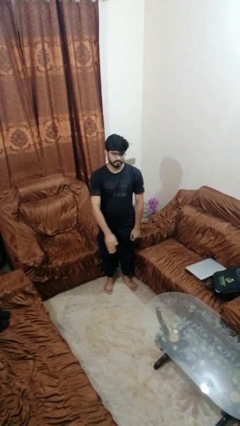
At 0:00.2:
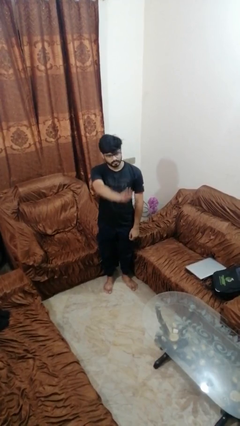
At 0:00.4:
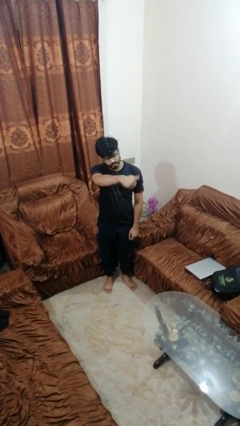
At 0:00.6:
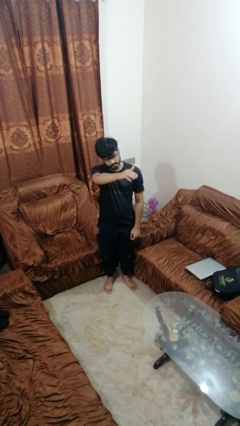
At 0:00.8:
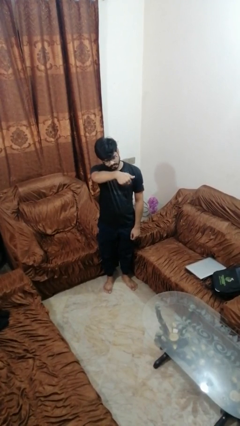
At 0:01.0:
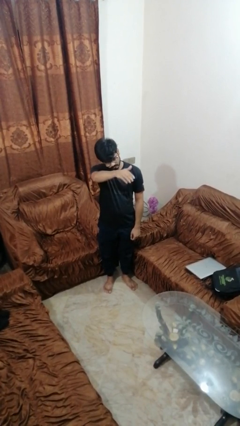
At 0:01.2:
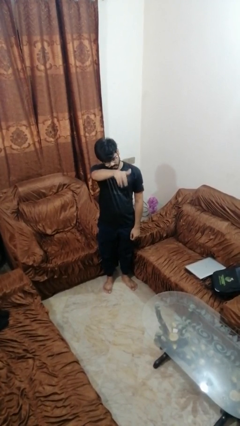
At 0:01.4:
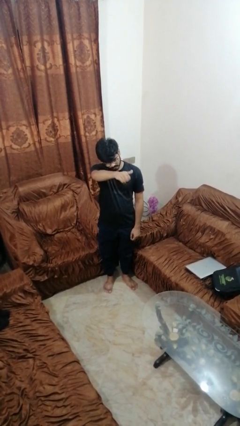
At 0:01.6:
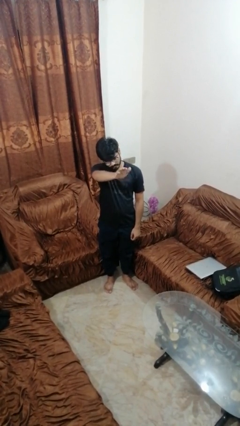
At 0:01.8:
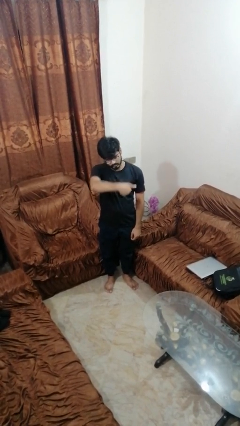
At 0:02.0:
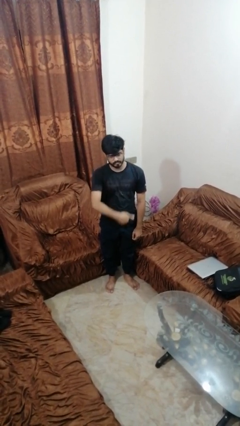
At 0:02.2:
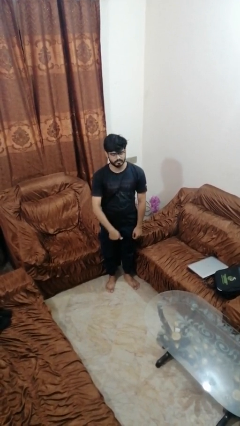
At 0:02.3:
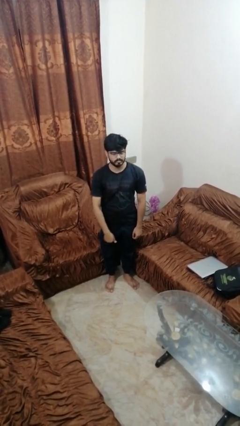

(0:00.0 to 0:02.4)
person gestures come here

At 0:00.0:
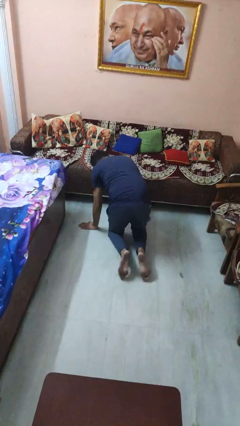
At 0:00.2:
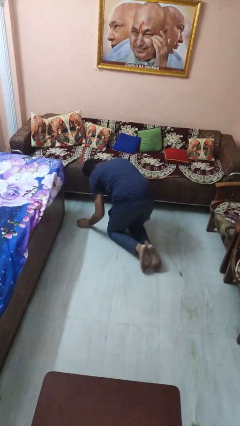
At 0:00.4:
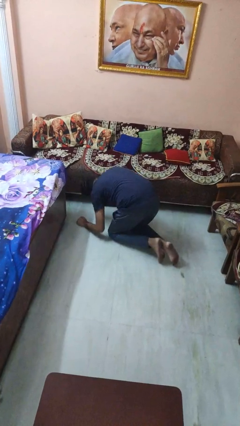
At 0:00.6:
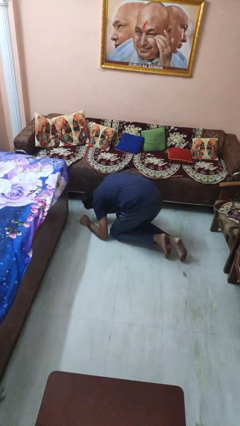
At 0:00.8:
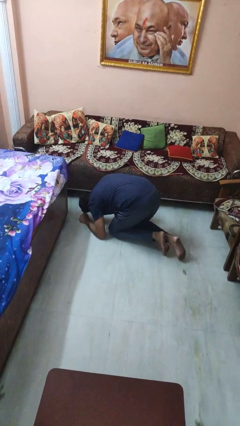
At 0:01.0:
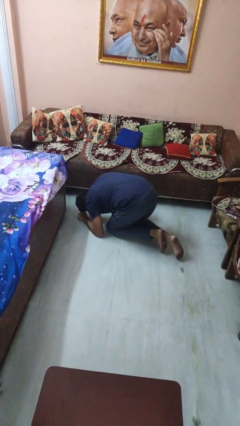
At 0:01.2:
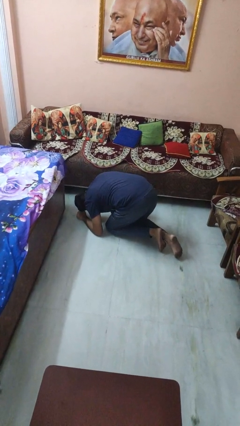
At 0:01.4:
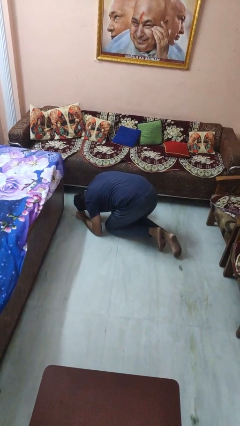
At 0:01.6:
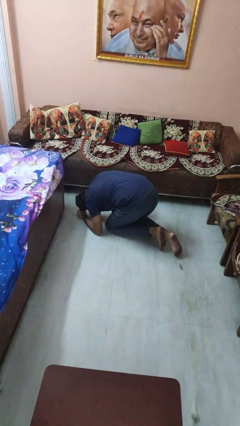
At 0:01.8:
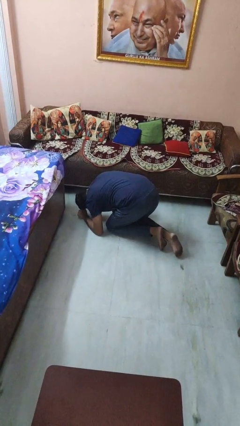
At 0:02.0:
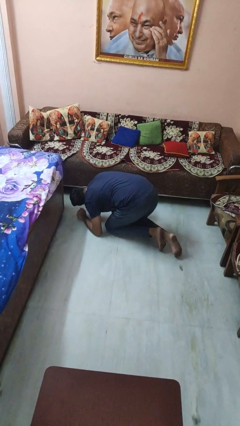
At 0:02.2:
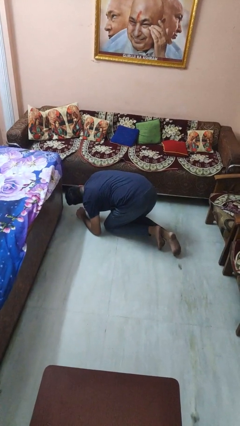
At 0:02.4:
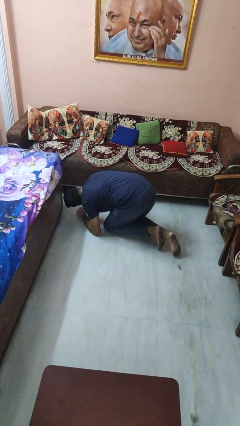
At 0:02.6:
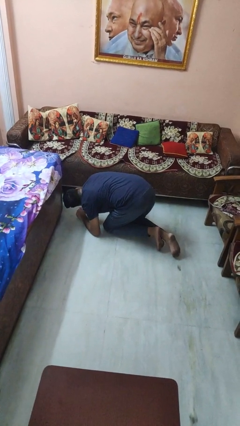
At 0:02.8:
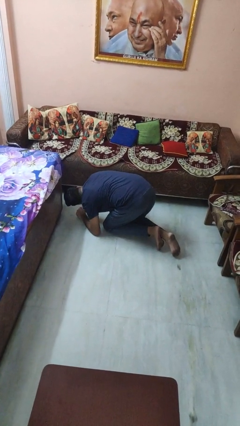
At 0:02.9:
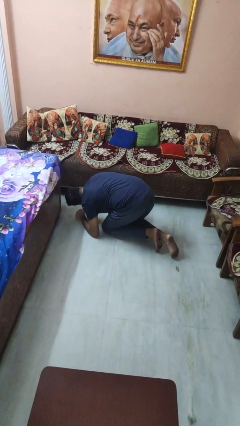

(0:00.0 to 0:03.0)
person searches under couch

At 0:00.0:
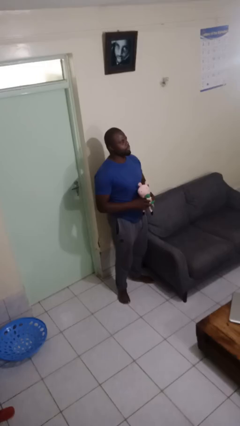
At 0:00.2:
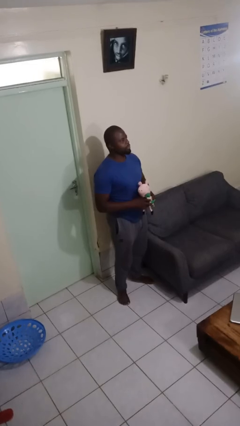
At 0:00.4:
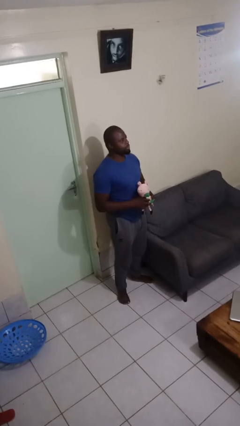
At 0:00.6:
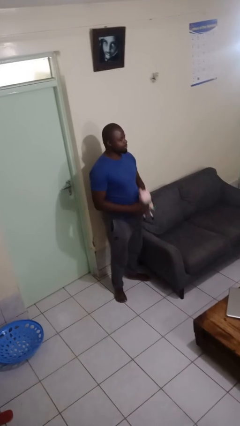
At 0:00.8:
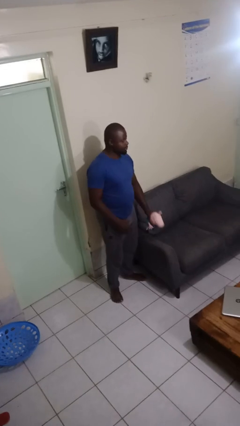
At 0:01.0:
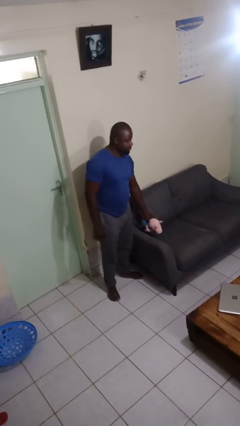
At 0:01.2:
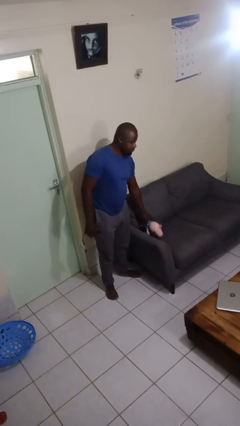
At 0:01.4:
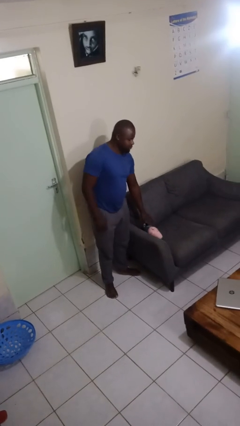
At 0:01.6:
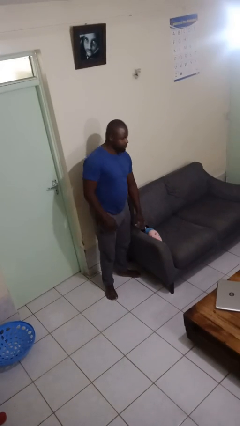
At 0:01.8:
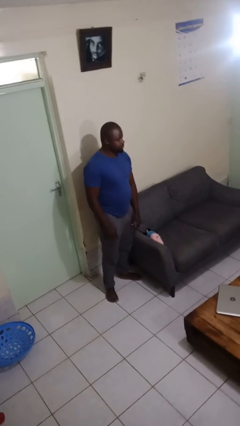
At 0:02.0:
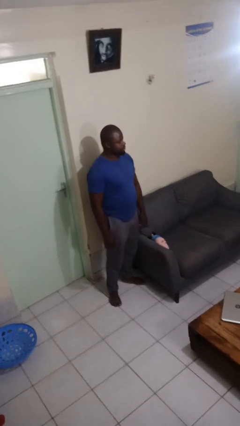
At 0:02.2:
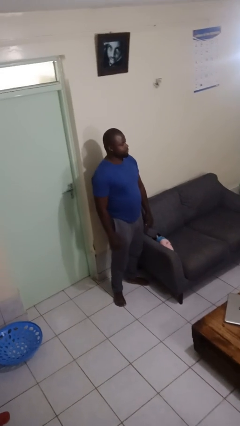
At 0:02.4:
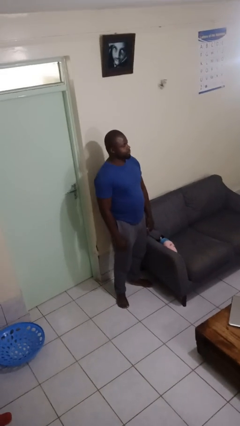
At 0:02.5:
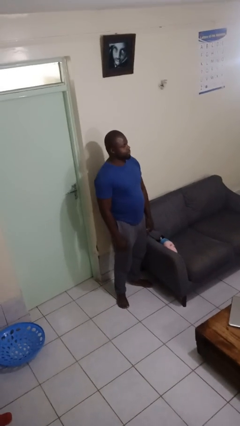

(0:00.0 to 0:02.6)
person puts down object on couch

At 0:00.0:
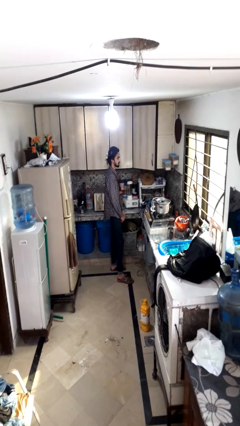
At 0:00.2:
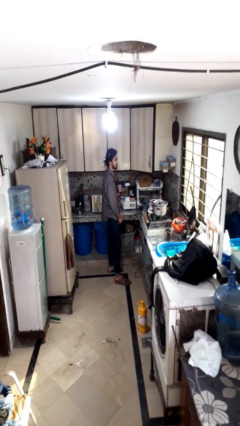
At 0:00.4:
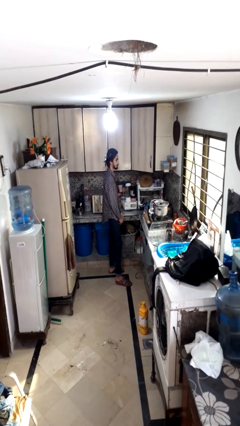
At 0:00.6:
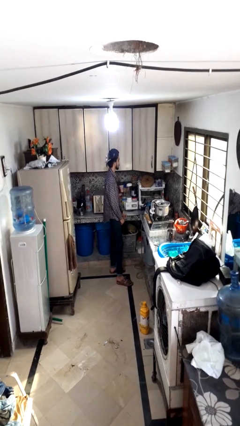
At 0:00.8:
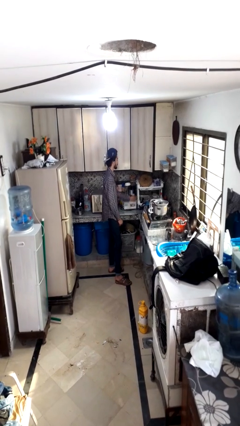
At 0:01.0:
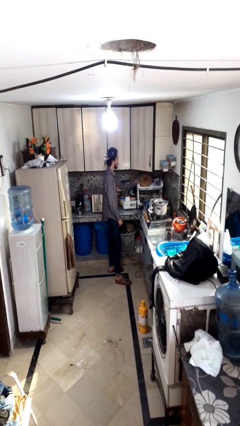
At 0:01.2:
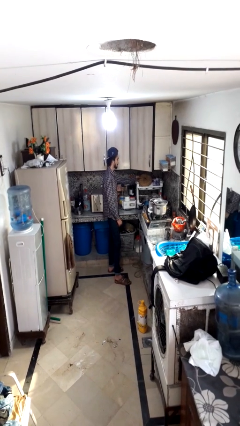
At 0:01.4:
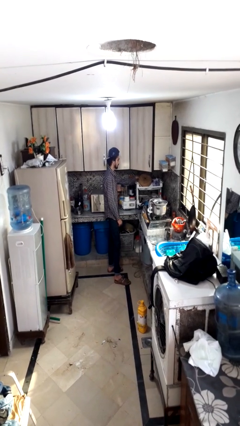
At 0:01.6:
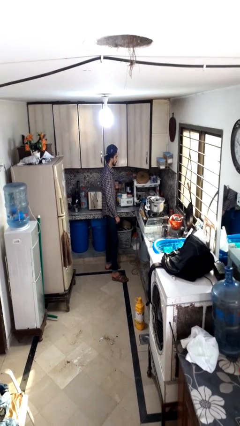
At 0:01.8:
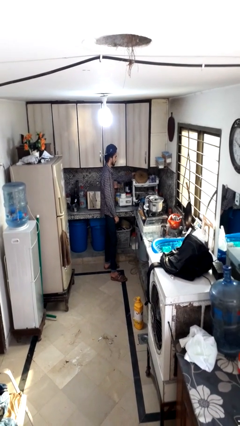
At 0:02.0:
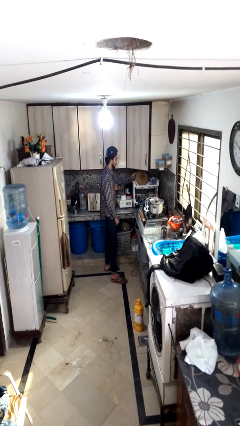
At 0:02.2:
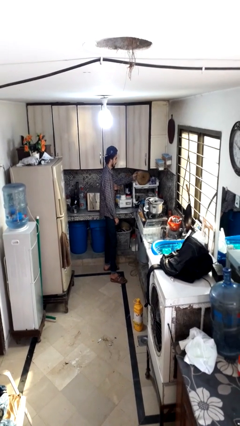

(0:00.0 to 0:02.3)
person unloads dishwasher

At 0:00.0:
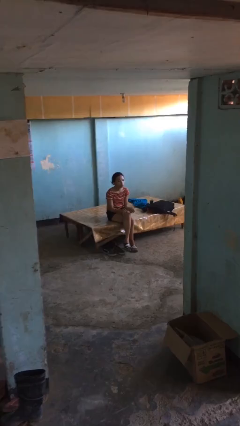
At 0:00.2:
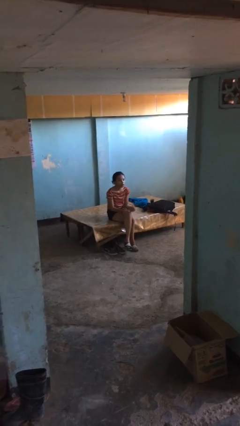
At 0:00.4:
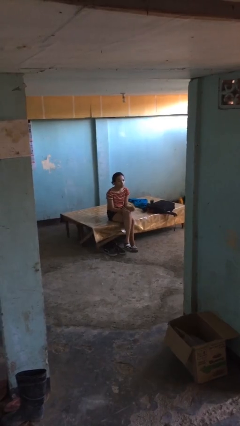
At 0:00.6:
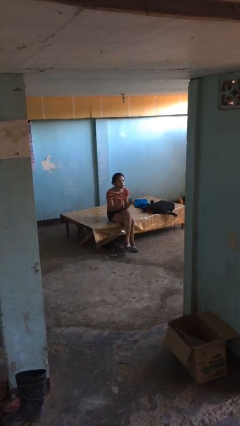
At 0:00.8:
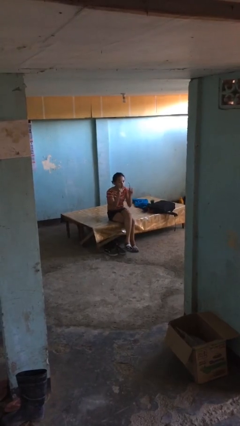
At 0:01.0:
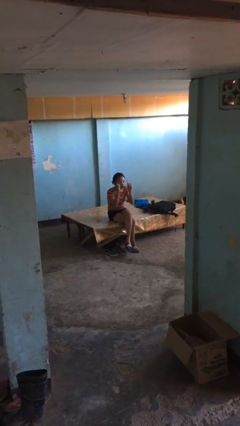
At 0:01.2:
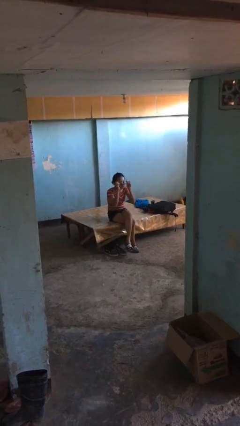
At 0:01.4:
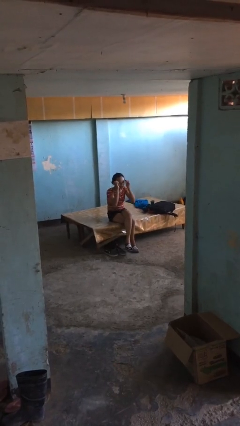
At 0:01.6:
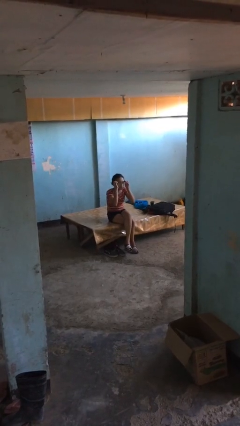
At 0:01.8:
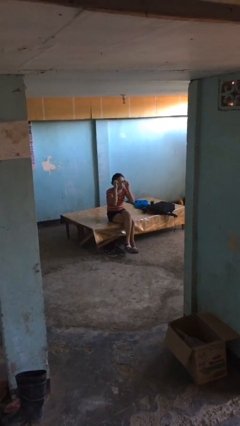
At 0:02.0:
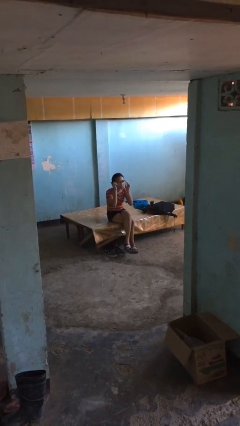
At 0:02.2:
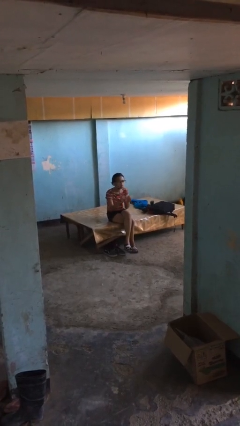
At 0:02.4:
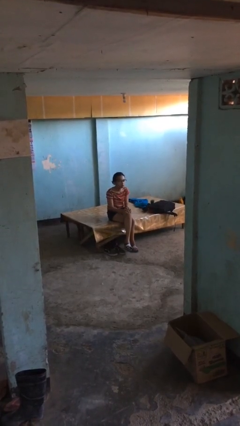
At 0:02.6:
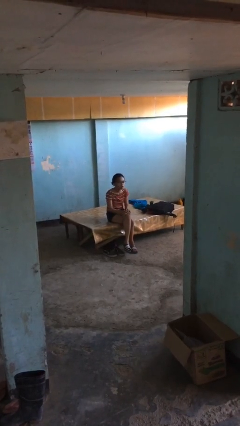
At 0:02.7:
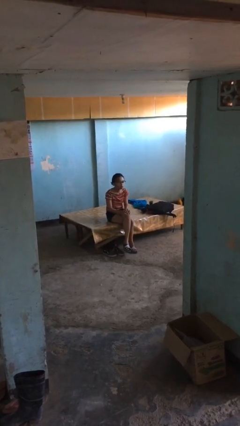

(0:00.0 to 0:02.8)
person puts on glasses

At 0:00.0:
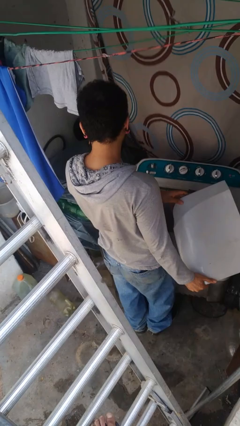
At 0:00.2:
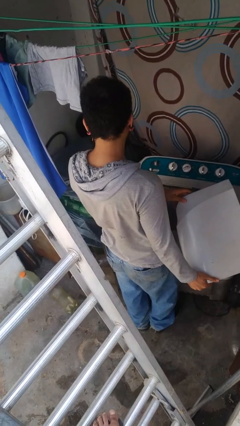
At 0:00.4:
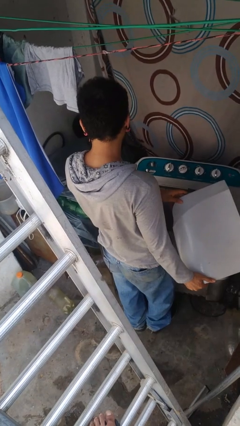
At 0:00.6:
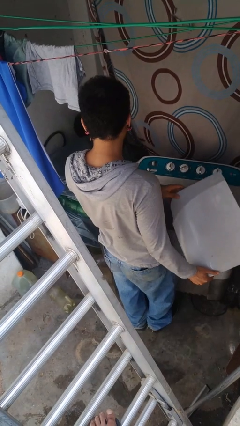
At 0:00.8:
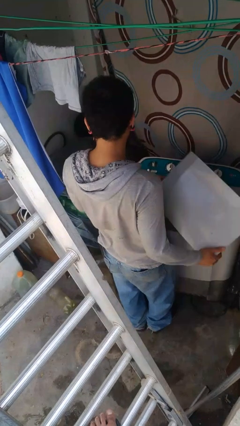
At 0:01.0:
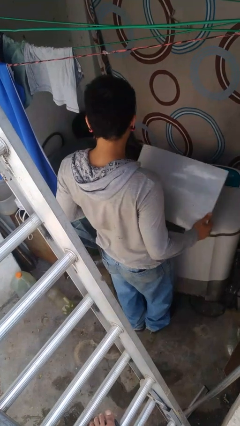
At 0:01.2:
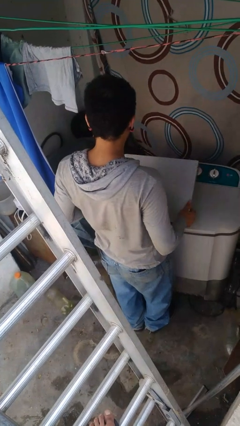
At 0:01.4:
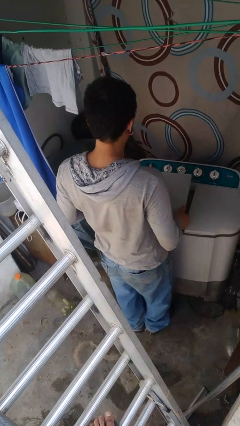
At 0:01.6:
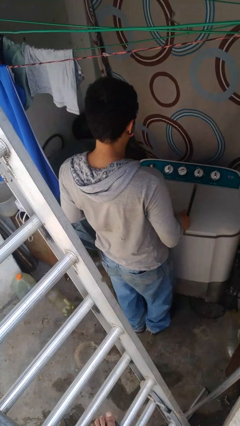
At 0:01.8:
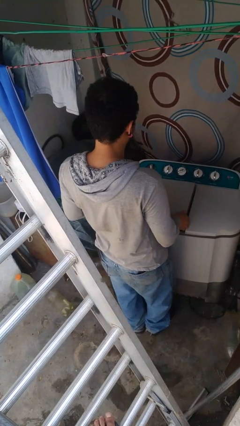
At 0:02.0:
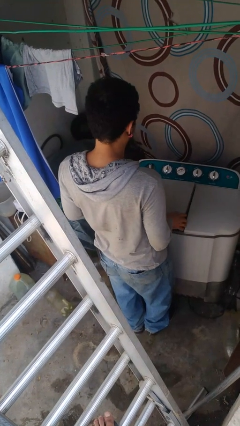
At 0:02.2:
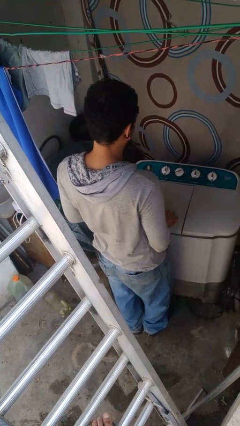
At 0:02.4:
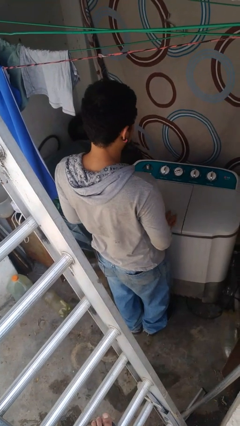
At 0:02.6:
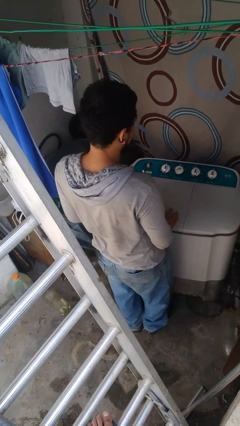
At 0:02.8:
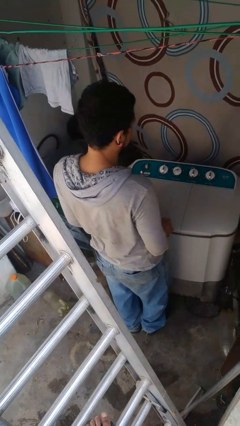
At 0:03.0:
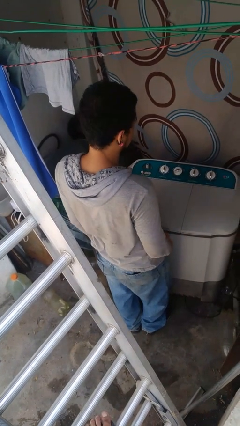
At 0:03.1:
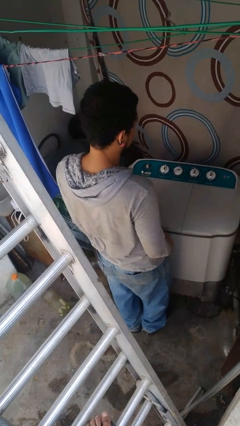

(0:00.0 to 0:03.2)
person closes clothes washer

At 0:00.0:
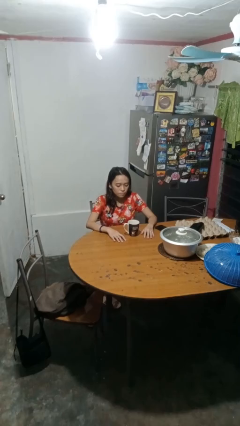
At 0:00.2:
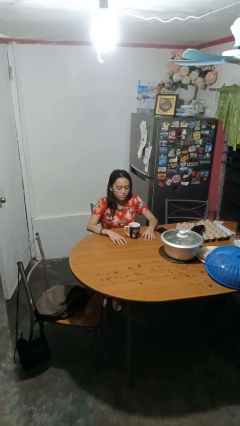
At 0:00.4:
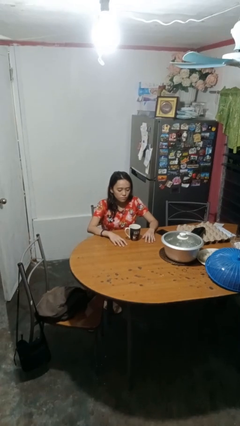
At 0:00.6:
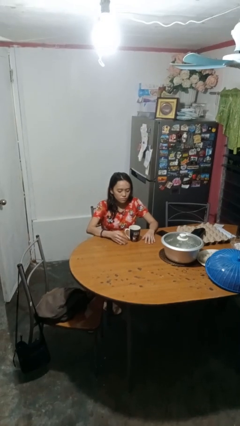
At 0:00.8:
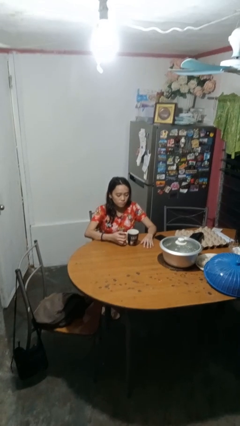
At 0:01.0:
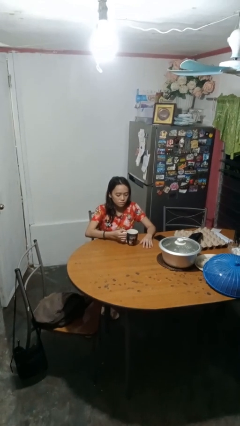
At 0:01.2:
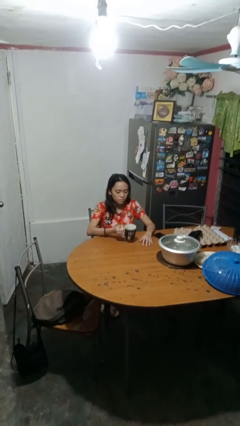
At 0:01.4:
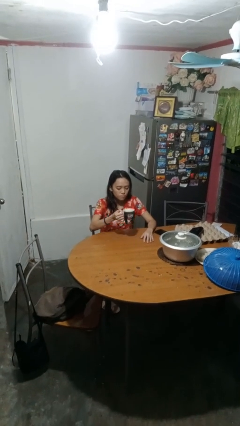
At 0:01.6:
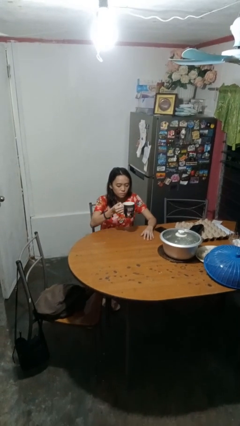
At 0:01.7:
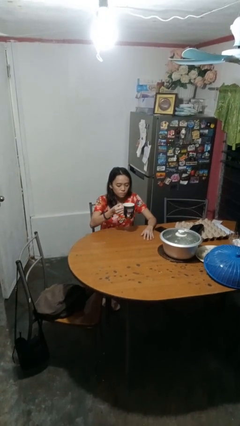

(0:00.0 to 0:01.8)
person picks up object from table
